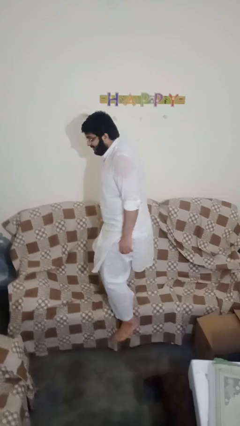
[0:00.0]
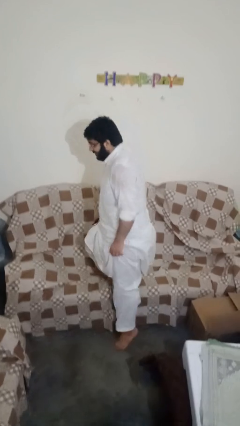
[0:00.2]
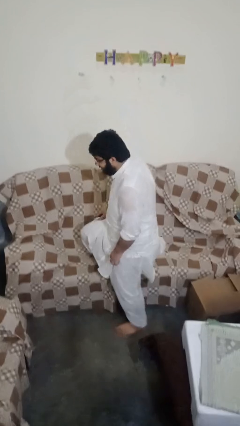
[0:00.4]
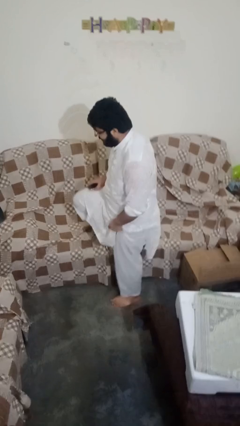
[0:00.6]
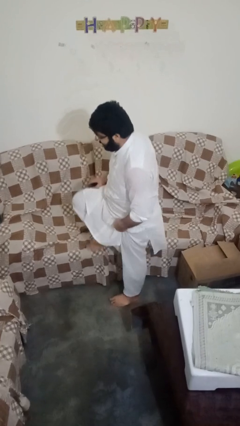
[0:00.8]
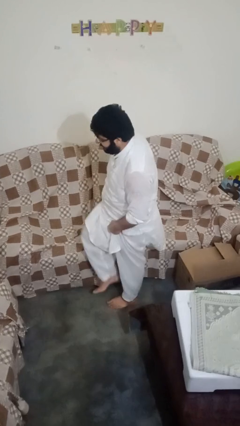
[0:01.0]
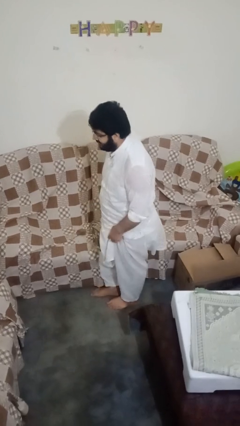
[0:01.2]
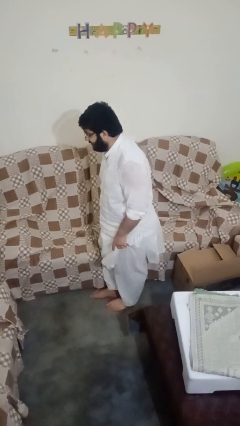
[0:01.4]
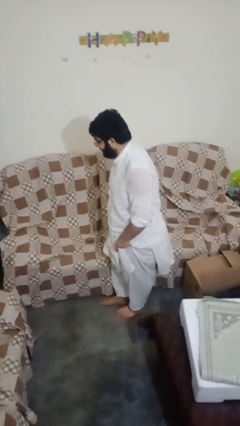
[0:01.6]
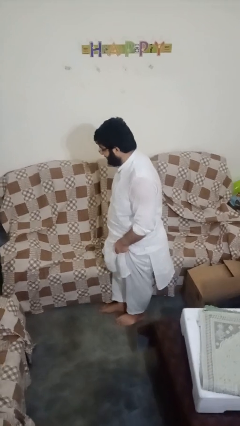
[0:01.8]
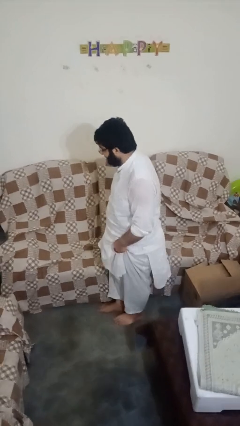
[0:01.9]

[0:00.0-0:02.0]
person climbs off couch

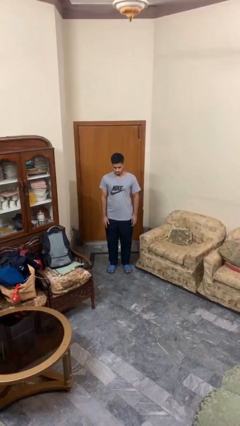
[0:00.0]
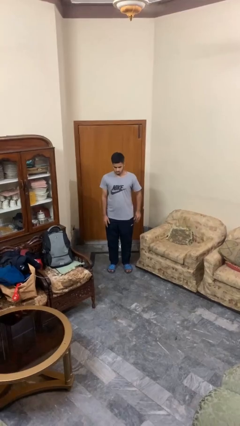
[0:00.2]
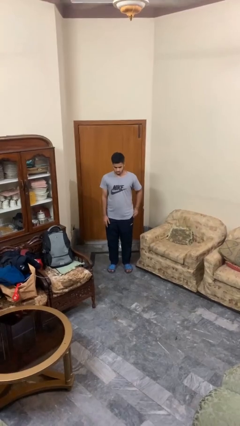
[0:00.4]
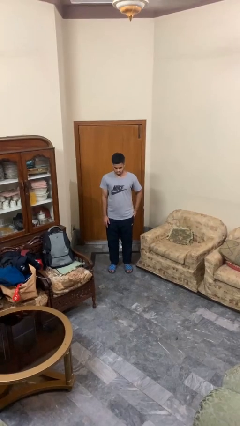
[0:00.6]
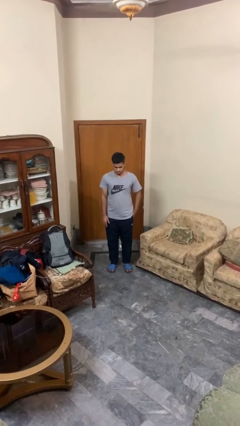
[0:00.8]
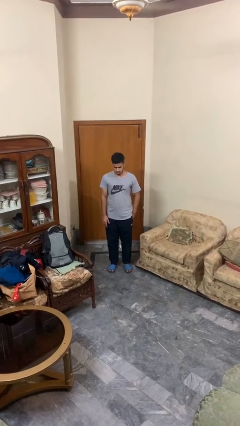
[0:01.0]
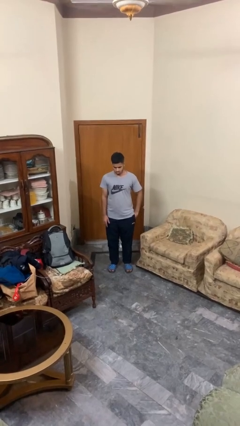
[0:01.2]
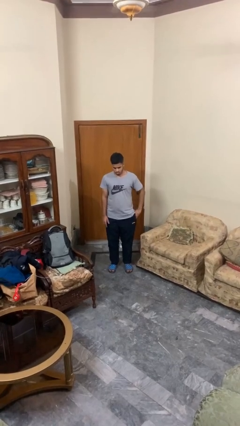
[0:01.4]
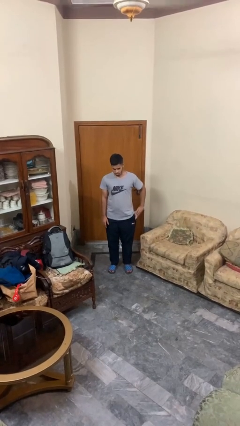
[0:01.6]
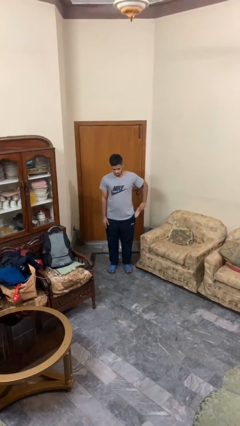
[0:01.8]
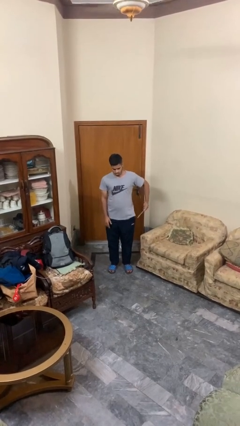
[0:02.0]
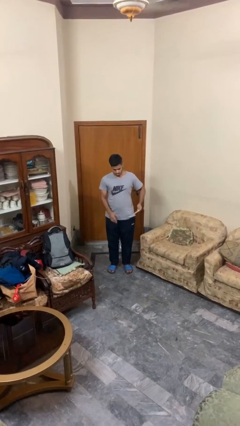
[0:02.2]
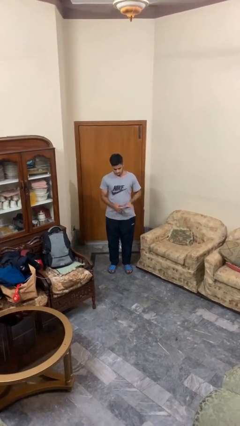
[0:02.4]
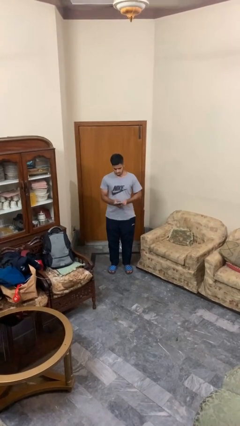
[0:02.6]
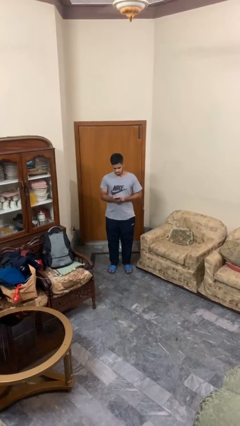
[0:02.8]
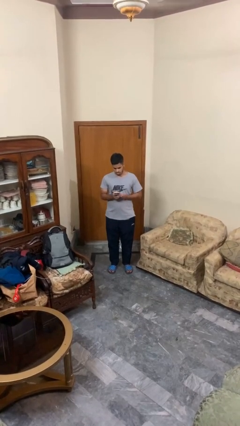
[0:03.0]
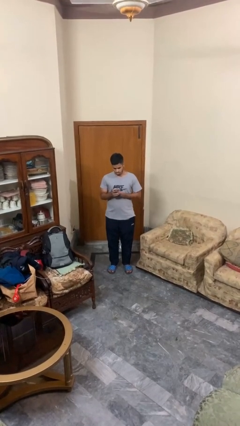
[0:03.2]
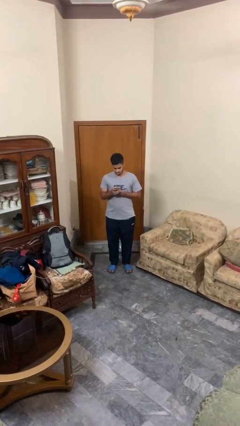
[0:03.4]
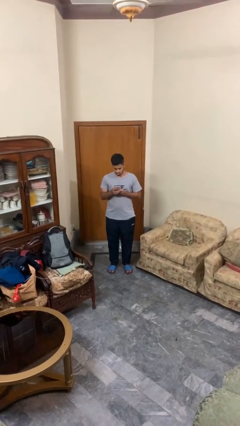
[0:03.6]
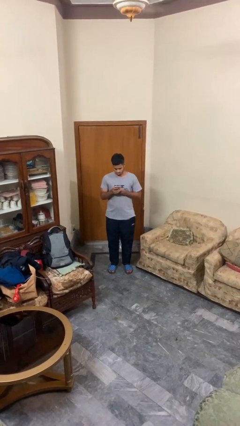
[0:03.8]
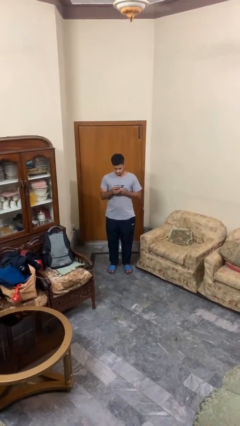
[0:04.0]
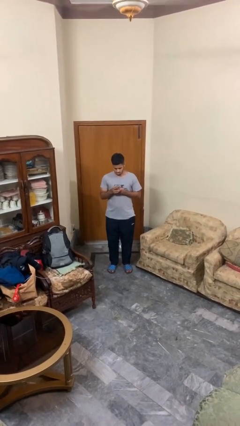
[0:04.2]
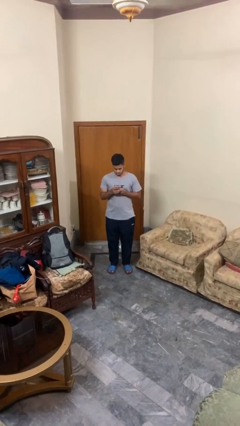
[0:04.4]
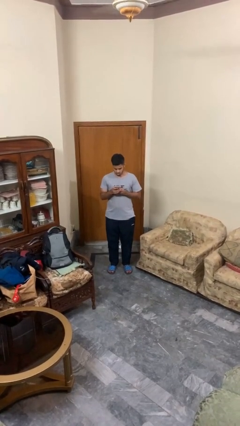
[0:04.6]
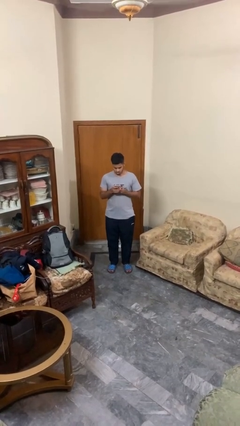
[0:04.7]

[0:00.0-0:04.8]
person takes phone from pocket

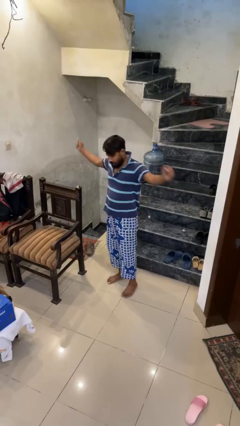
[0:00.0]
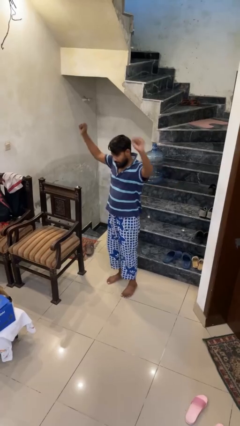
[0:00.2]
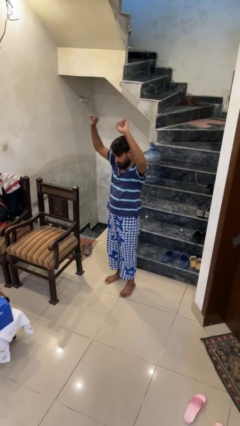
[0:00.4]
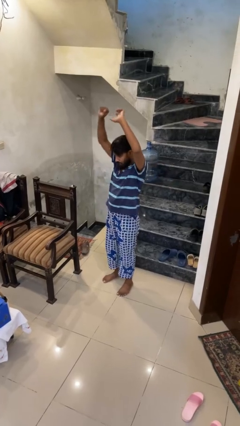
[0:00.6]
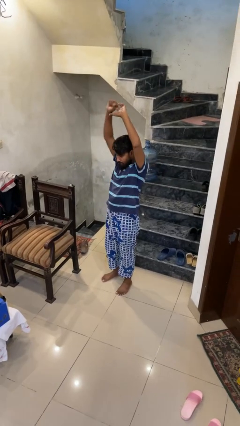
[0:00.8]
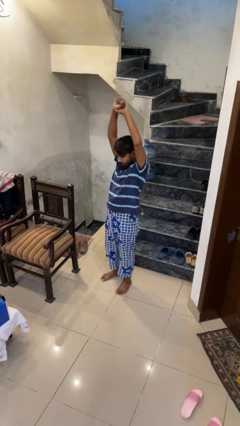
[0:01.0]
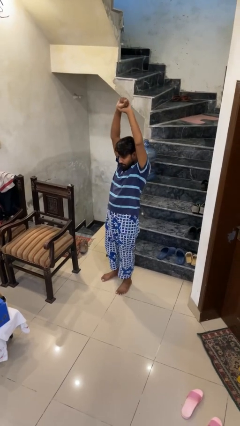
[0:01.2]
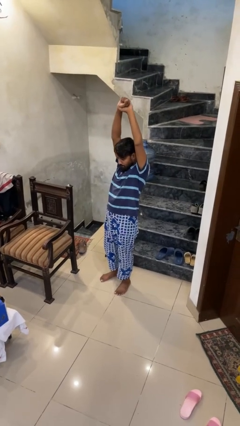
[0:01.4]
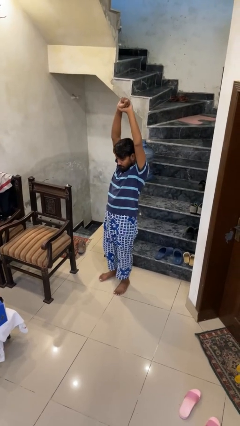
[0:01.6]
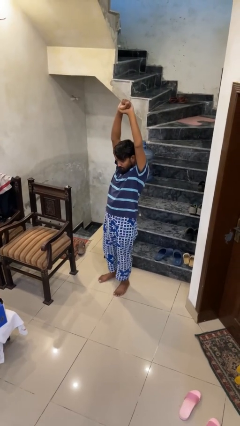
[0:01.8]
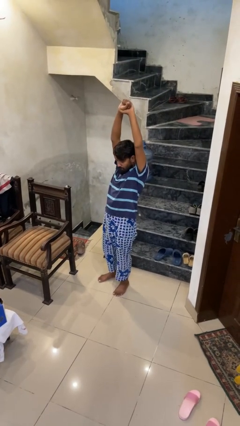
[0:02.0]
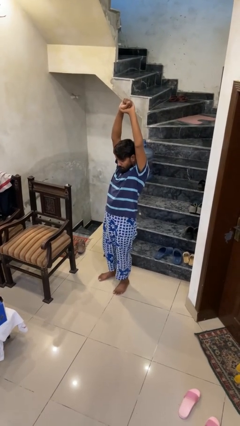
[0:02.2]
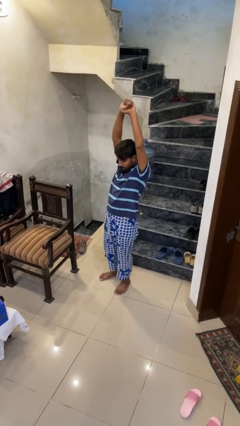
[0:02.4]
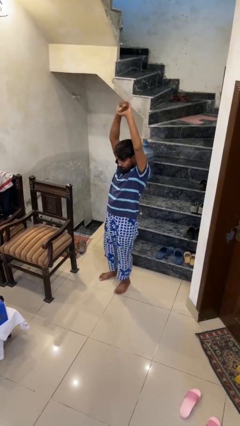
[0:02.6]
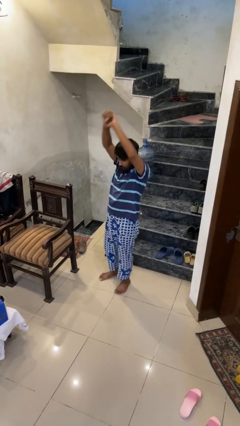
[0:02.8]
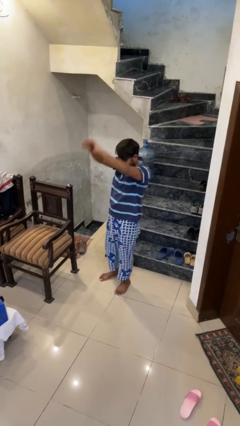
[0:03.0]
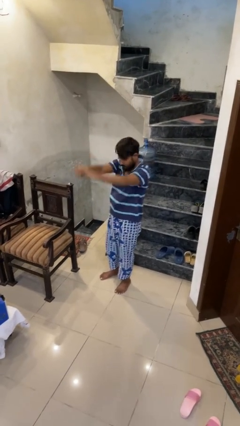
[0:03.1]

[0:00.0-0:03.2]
person stretches arms over head

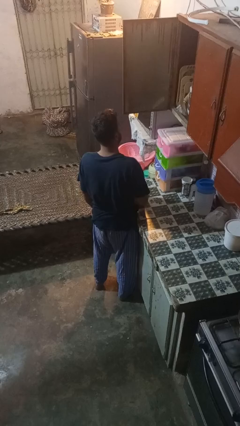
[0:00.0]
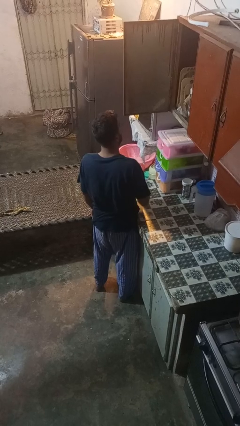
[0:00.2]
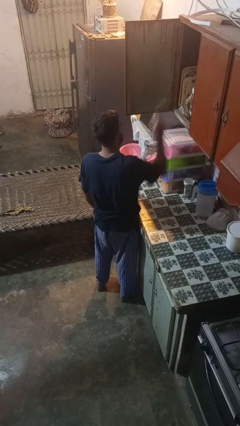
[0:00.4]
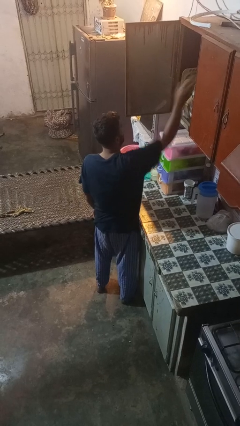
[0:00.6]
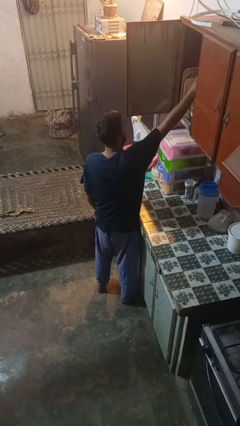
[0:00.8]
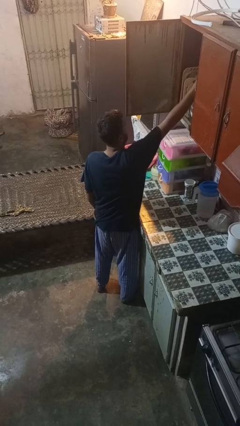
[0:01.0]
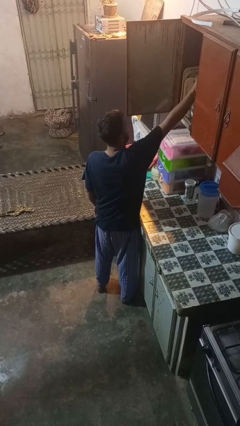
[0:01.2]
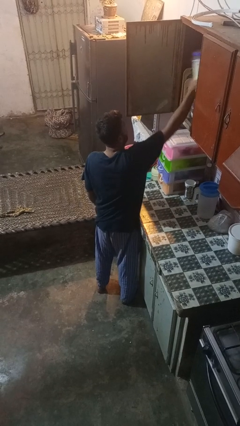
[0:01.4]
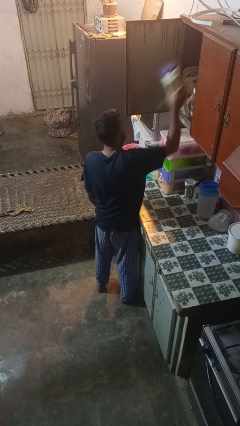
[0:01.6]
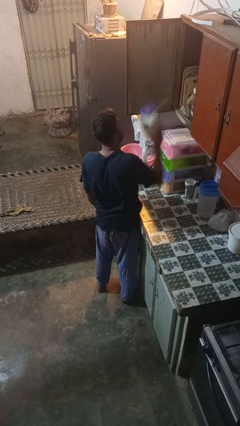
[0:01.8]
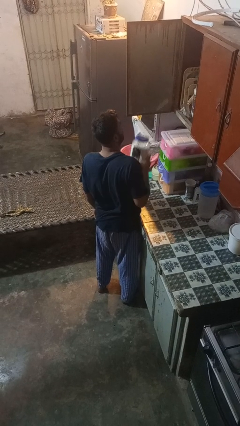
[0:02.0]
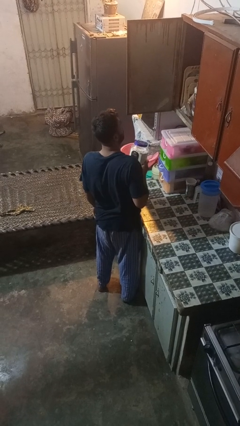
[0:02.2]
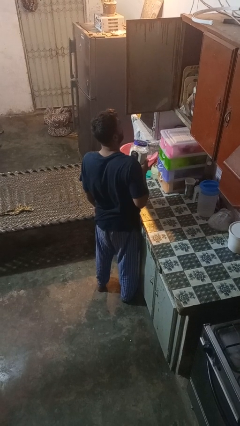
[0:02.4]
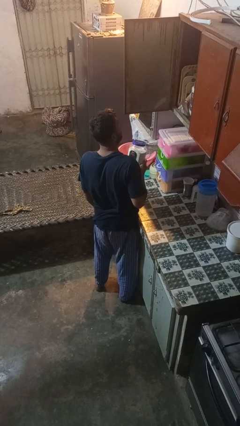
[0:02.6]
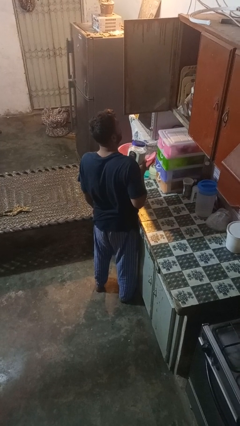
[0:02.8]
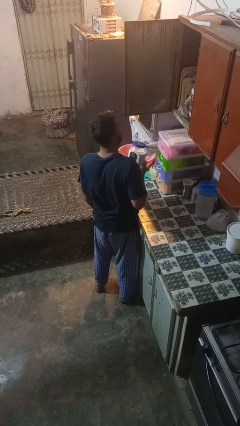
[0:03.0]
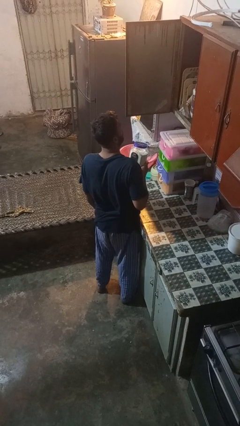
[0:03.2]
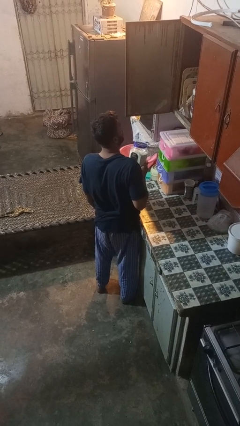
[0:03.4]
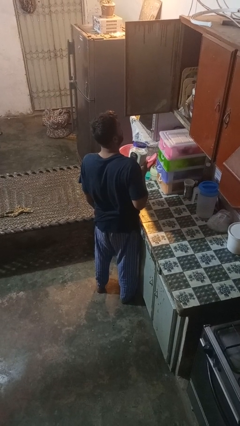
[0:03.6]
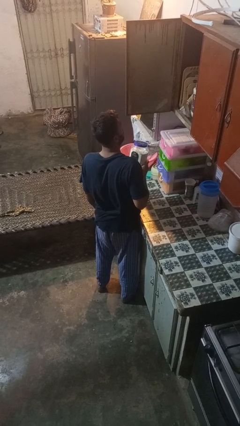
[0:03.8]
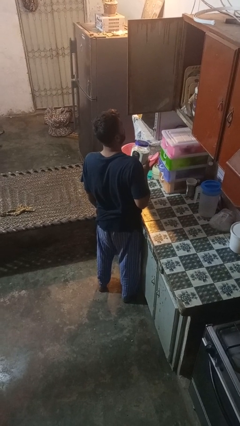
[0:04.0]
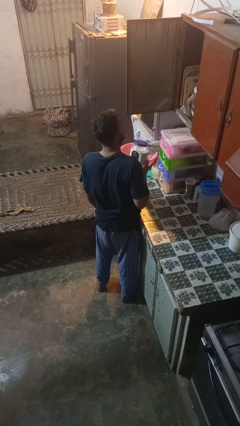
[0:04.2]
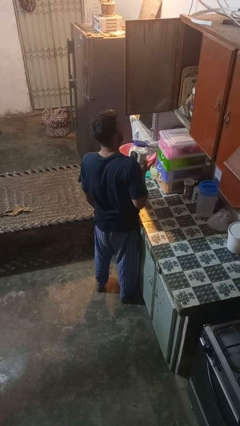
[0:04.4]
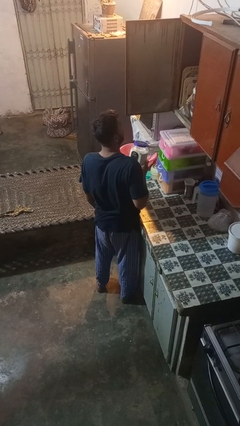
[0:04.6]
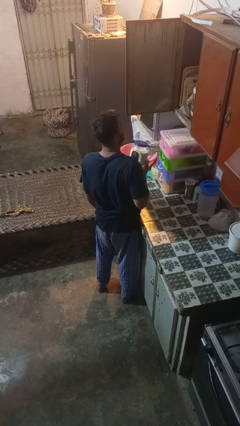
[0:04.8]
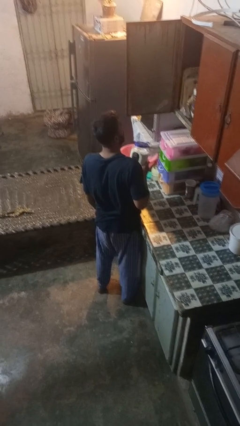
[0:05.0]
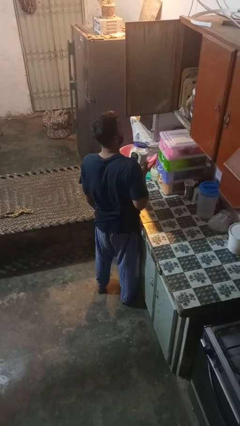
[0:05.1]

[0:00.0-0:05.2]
person puts object in cabinet

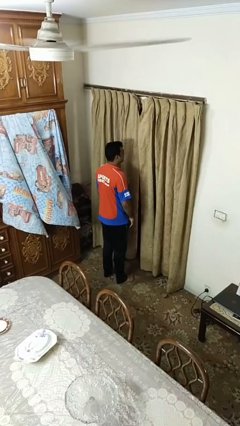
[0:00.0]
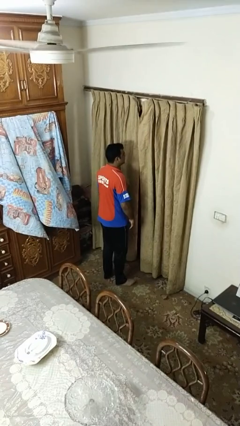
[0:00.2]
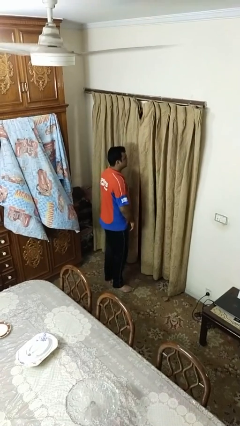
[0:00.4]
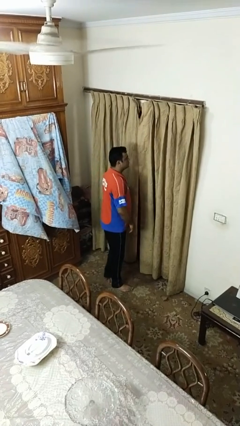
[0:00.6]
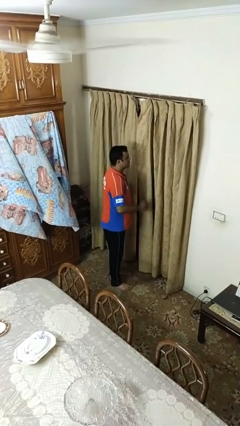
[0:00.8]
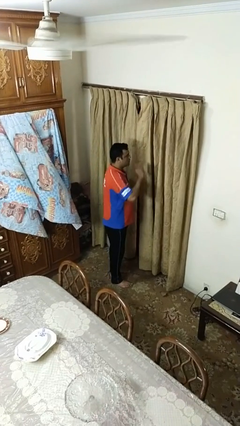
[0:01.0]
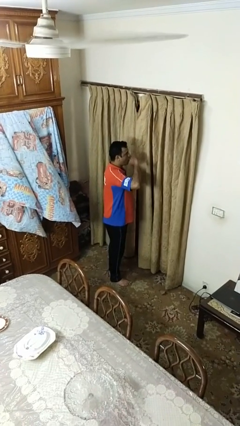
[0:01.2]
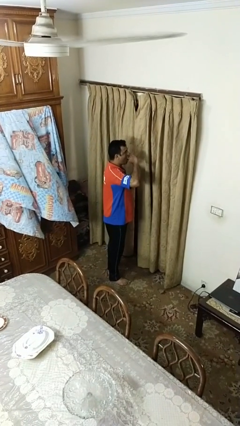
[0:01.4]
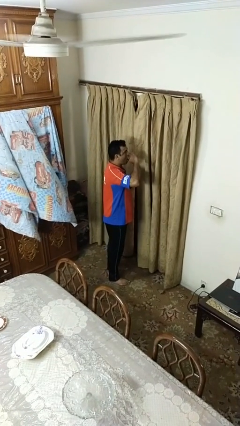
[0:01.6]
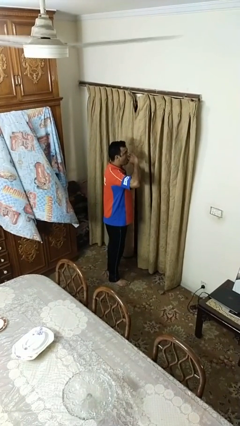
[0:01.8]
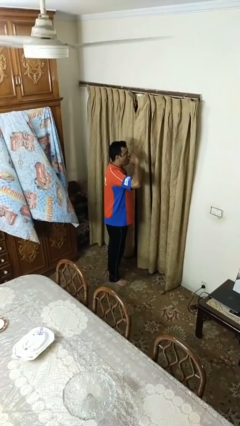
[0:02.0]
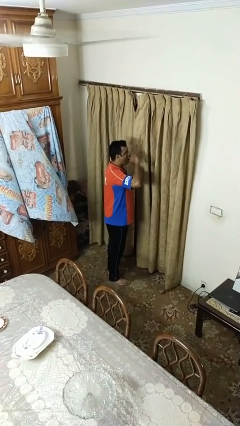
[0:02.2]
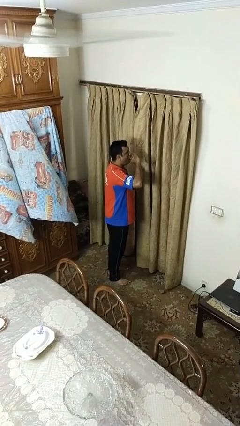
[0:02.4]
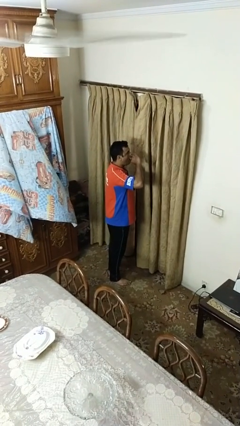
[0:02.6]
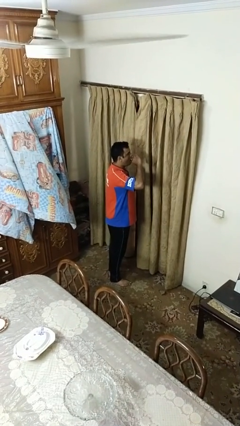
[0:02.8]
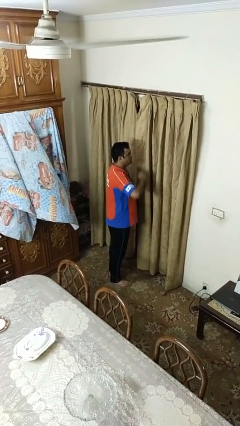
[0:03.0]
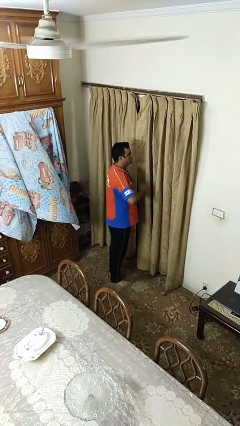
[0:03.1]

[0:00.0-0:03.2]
person yawns
